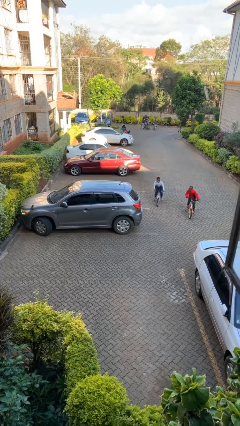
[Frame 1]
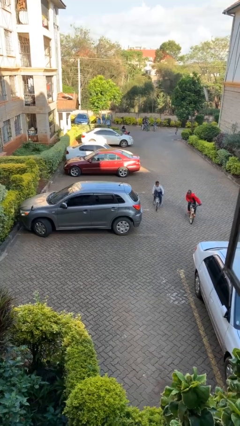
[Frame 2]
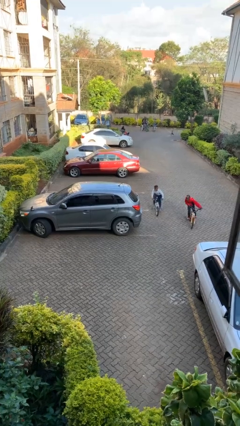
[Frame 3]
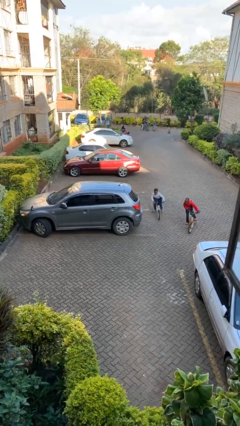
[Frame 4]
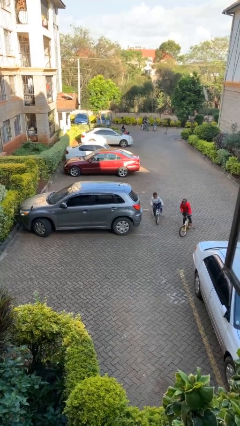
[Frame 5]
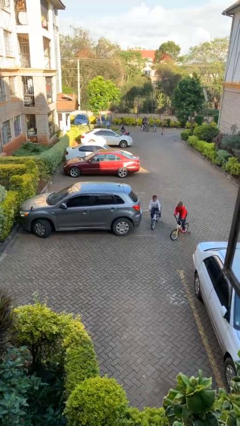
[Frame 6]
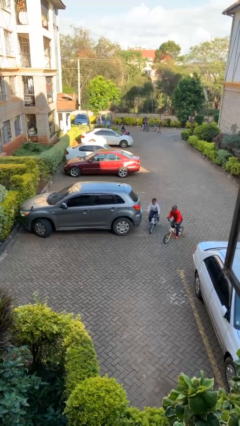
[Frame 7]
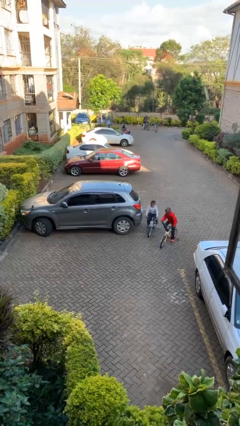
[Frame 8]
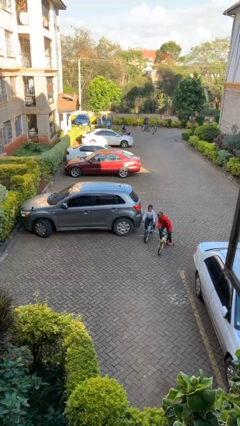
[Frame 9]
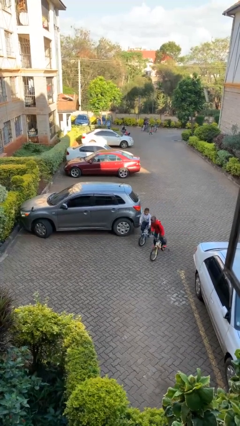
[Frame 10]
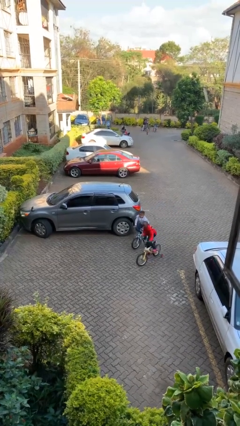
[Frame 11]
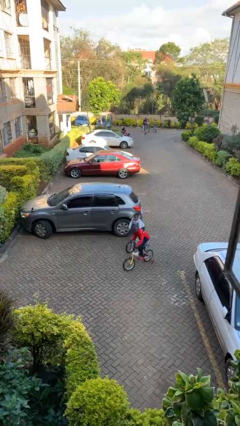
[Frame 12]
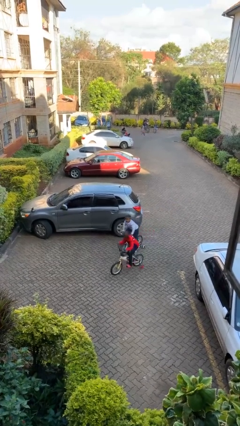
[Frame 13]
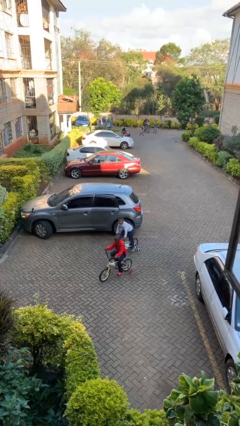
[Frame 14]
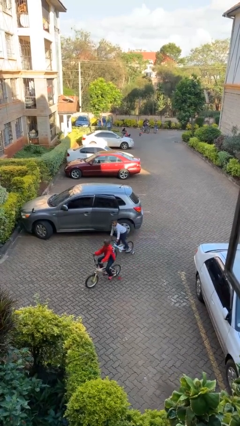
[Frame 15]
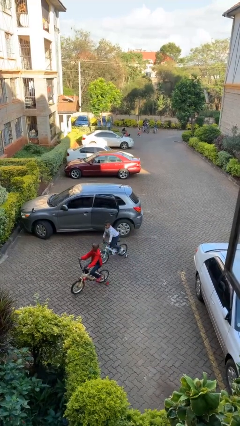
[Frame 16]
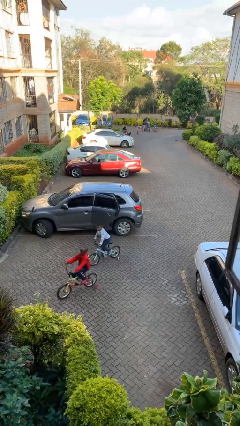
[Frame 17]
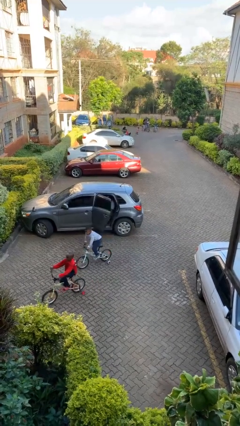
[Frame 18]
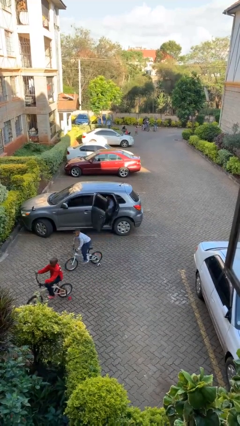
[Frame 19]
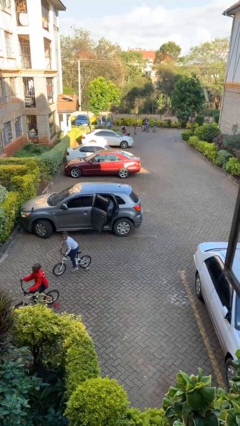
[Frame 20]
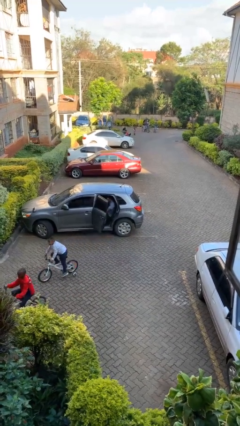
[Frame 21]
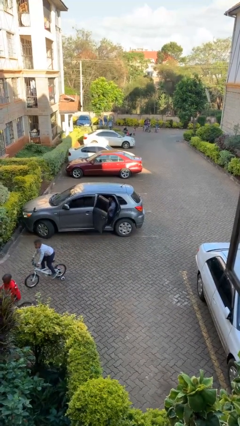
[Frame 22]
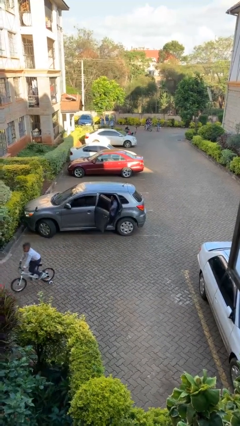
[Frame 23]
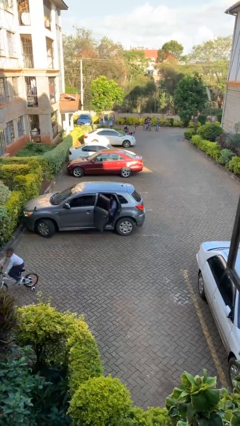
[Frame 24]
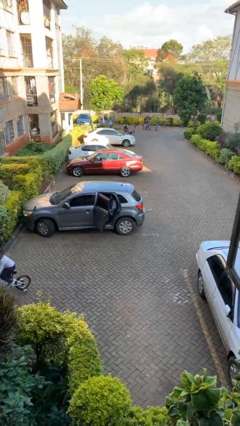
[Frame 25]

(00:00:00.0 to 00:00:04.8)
person opens car door

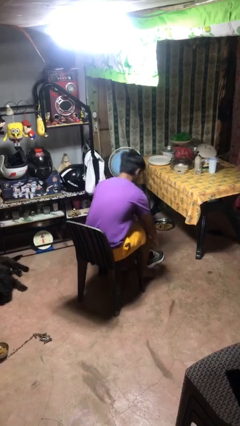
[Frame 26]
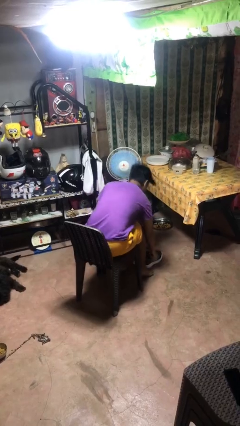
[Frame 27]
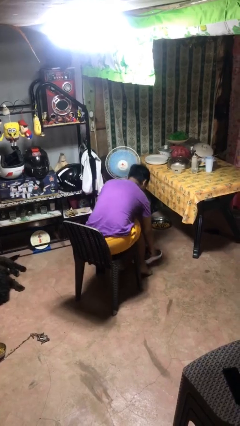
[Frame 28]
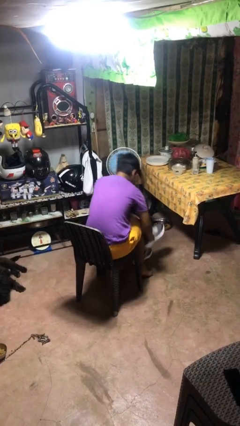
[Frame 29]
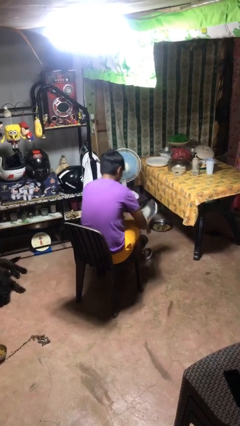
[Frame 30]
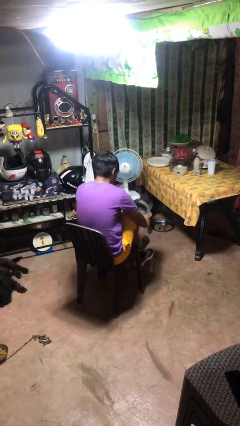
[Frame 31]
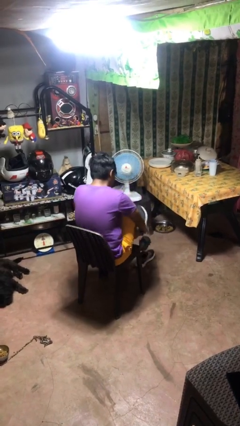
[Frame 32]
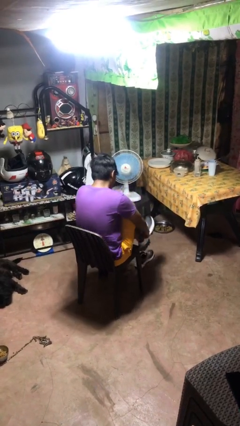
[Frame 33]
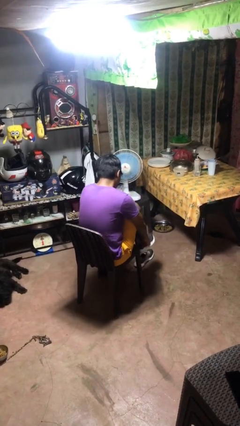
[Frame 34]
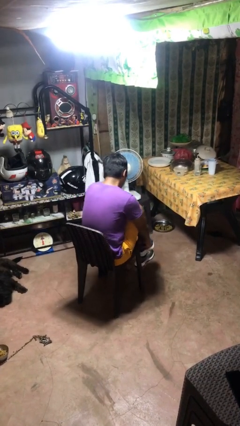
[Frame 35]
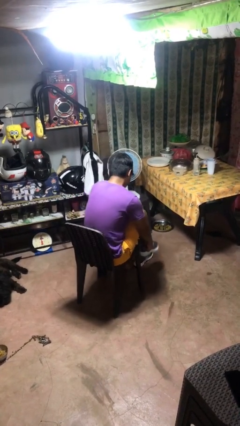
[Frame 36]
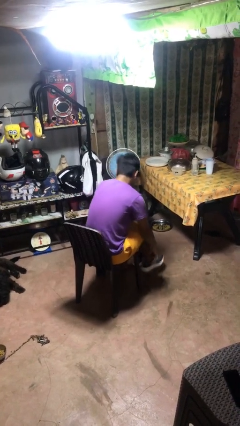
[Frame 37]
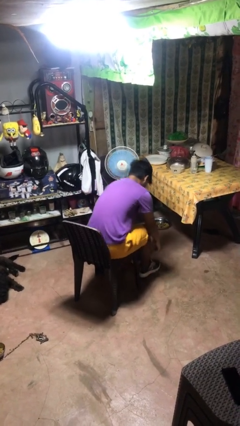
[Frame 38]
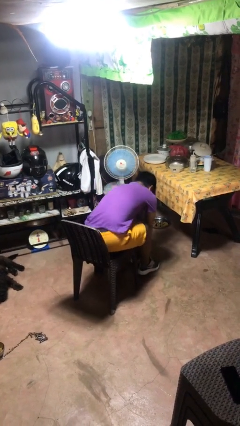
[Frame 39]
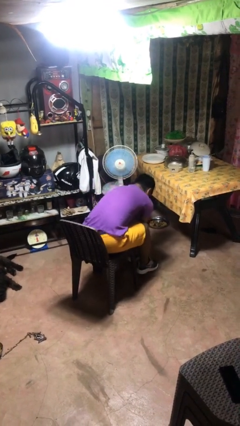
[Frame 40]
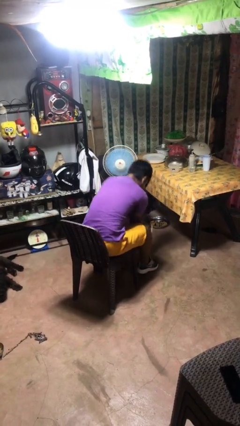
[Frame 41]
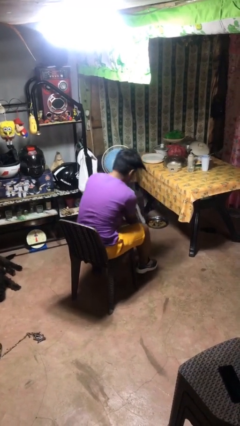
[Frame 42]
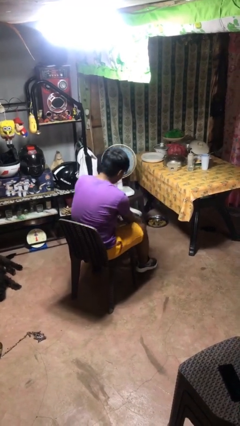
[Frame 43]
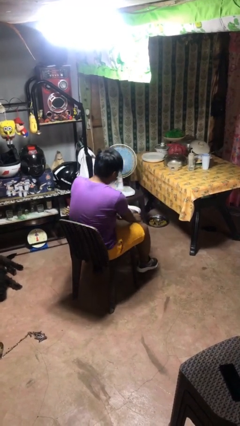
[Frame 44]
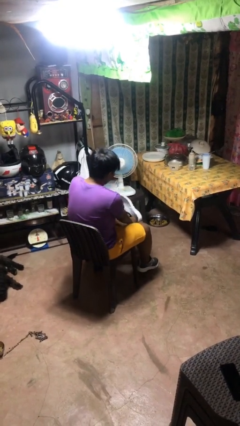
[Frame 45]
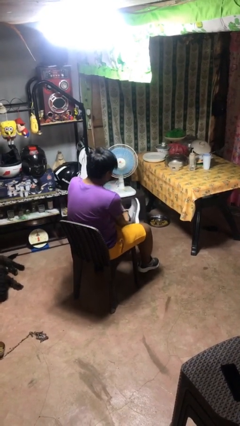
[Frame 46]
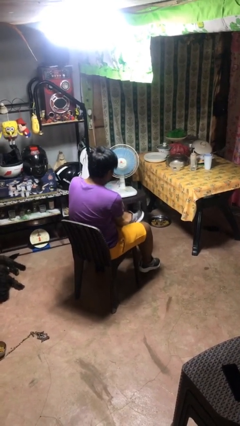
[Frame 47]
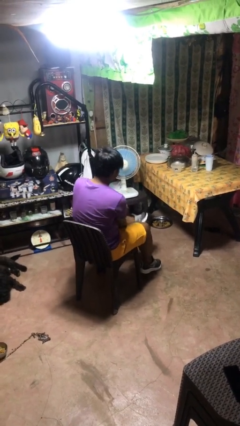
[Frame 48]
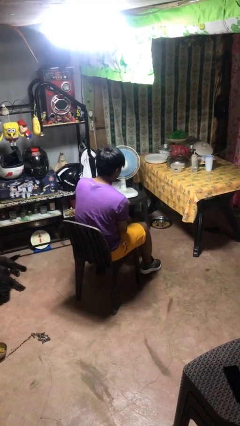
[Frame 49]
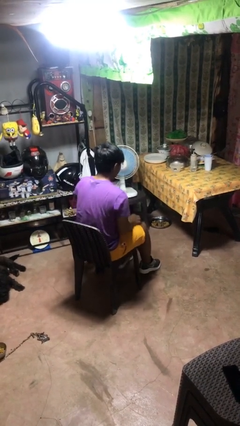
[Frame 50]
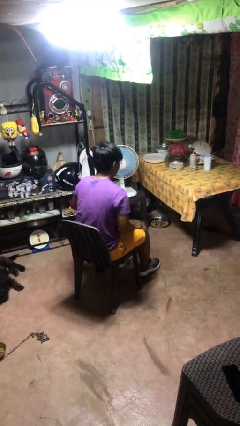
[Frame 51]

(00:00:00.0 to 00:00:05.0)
person puts on shoes

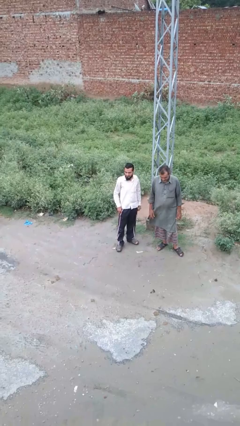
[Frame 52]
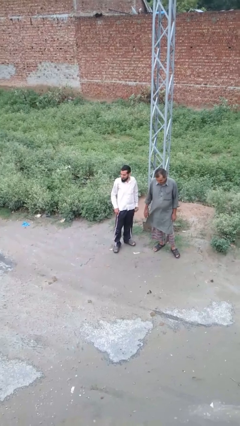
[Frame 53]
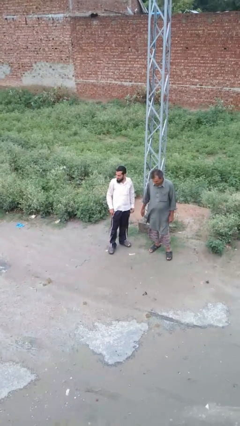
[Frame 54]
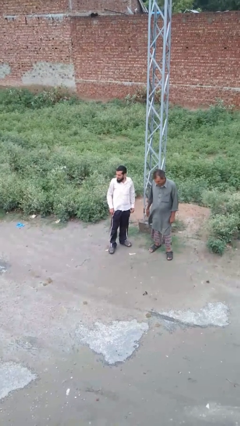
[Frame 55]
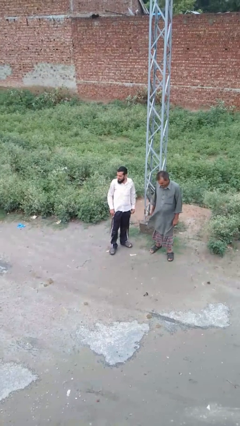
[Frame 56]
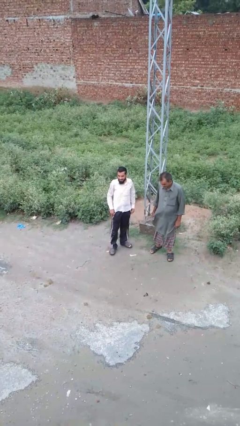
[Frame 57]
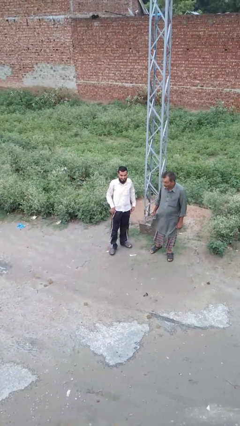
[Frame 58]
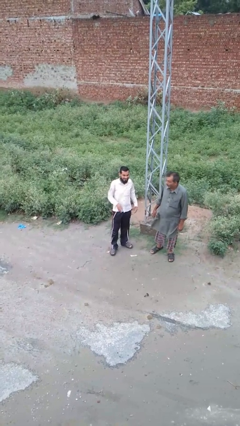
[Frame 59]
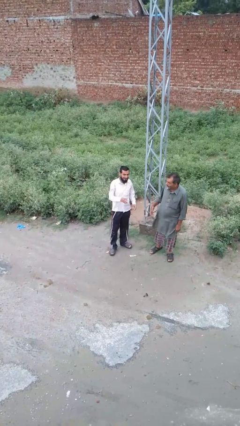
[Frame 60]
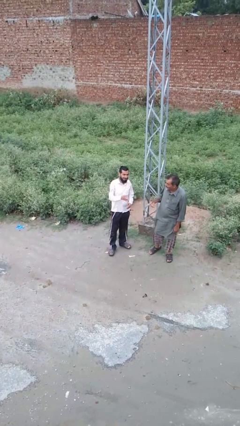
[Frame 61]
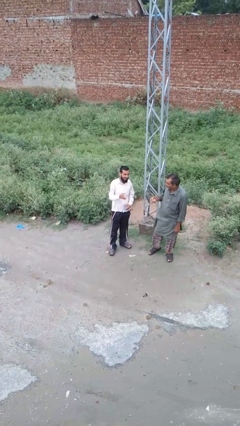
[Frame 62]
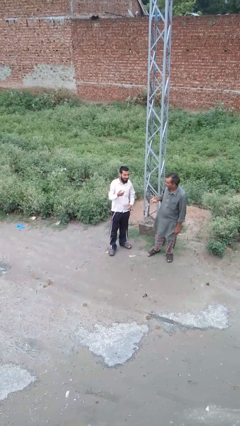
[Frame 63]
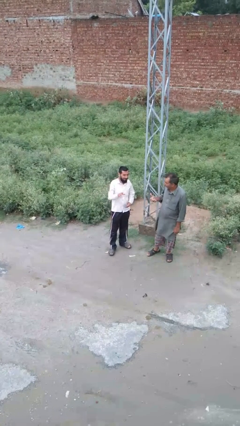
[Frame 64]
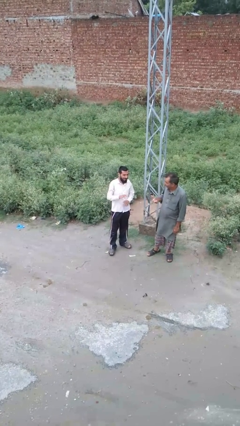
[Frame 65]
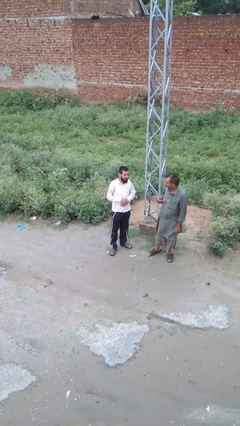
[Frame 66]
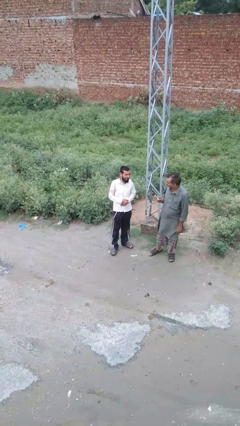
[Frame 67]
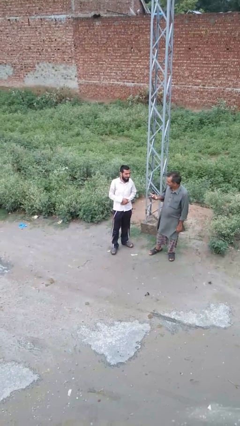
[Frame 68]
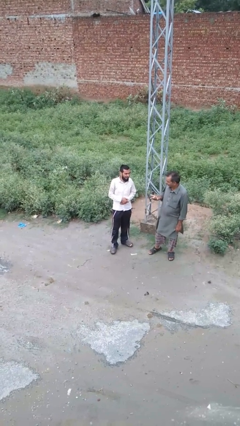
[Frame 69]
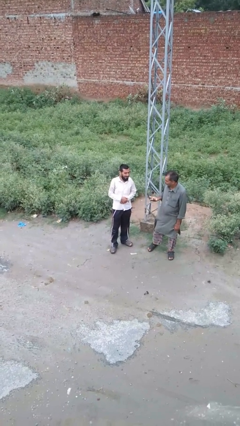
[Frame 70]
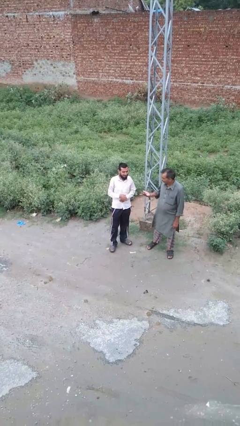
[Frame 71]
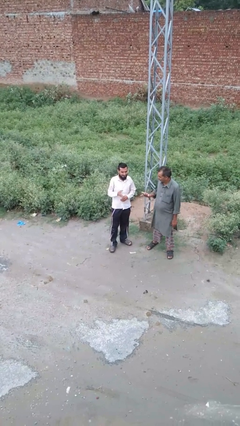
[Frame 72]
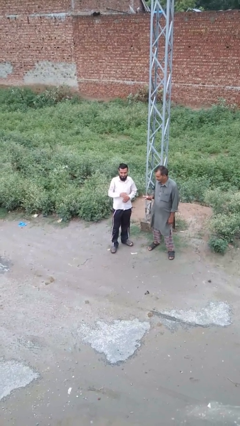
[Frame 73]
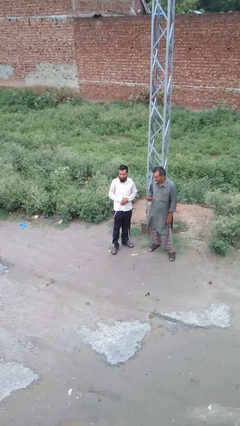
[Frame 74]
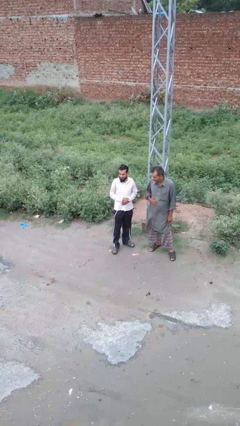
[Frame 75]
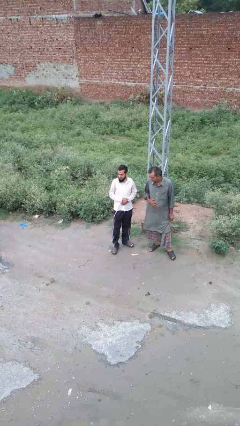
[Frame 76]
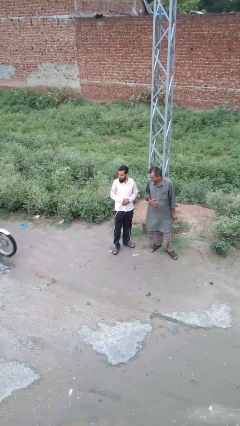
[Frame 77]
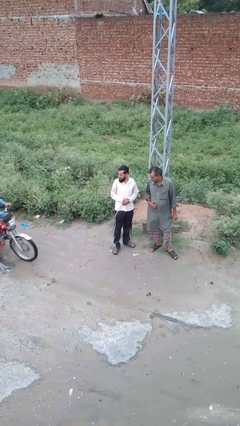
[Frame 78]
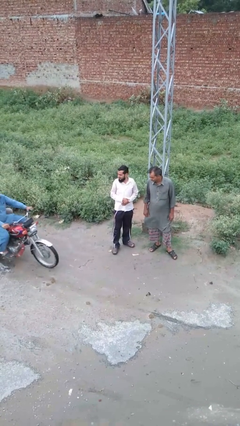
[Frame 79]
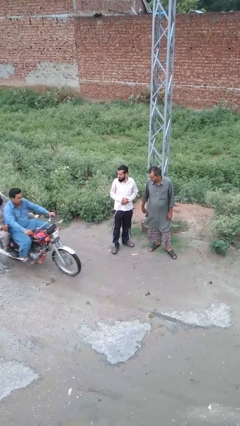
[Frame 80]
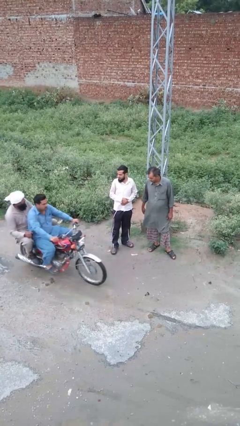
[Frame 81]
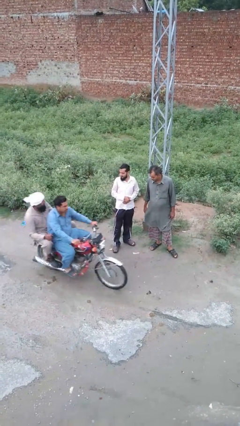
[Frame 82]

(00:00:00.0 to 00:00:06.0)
person laughs with person

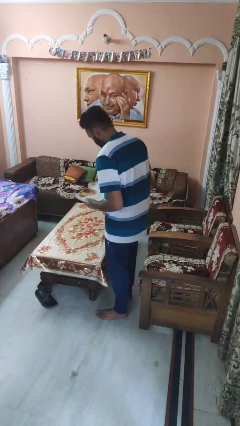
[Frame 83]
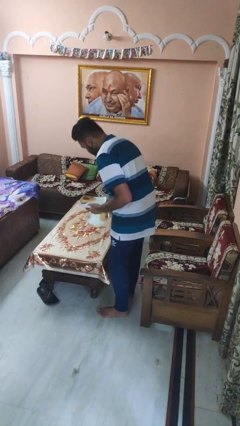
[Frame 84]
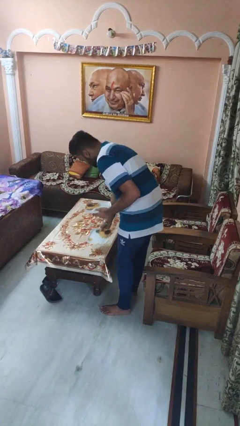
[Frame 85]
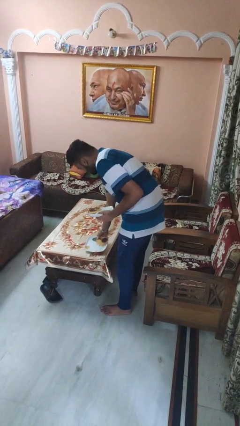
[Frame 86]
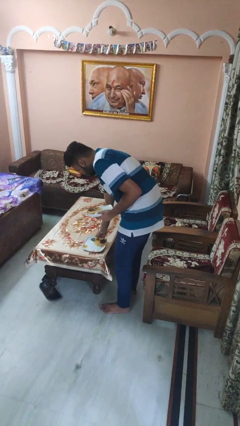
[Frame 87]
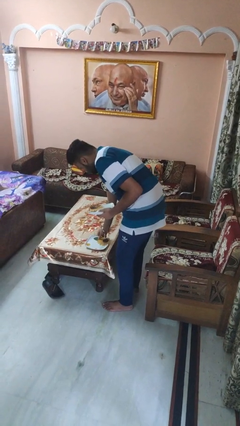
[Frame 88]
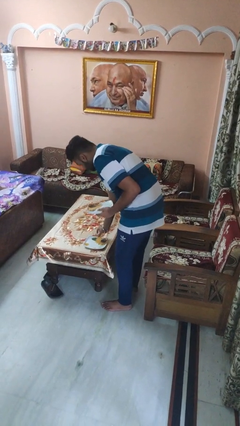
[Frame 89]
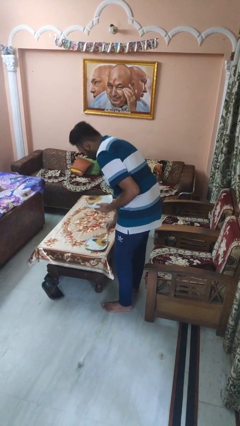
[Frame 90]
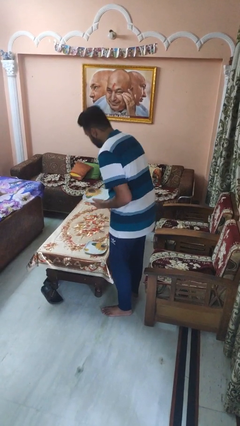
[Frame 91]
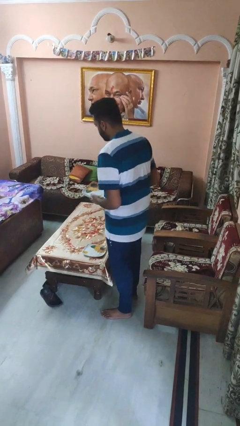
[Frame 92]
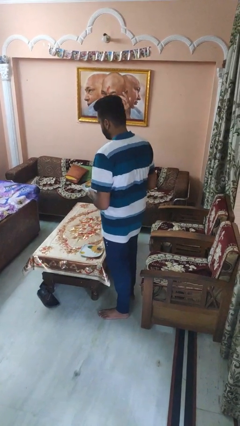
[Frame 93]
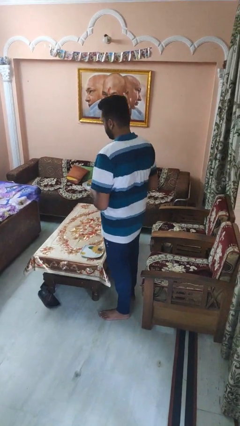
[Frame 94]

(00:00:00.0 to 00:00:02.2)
person sets table
